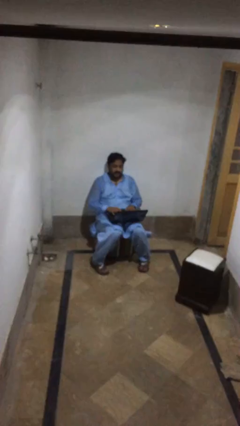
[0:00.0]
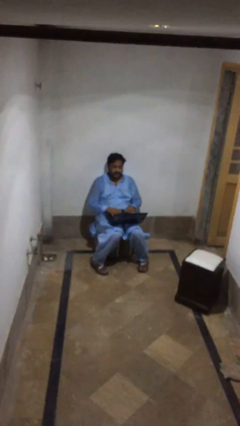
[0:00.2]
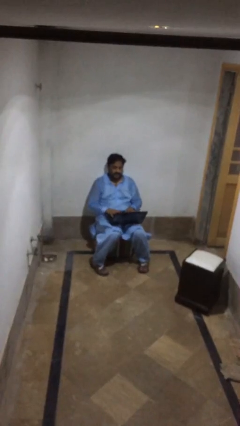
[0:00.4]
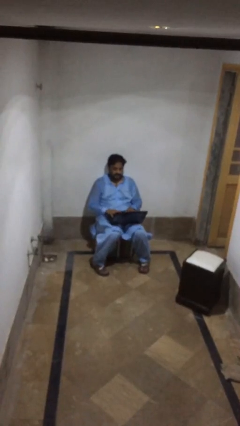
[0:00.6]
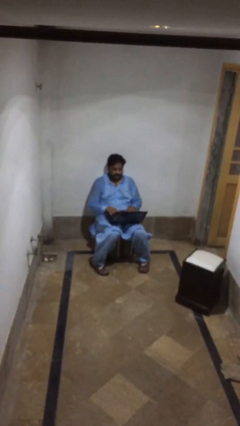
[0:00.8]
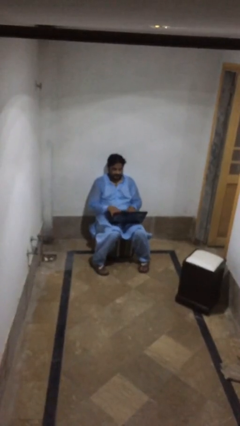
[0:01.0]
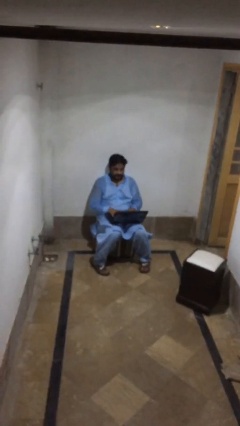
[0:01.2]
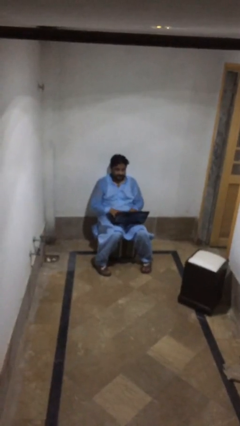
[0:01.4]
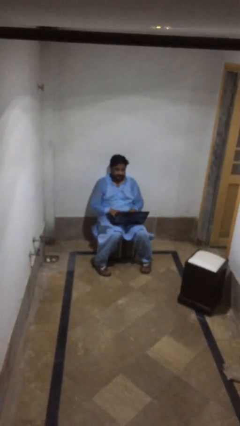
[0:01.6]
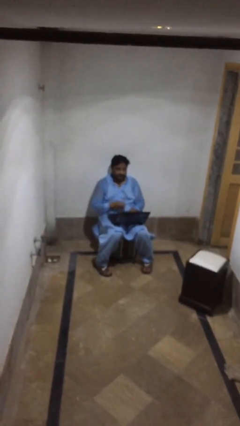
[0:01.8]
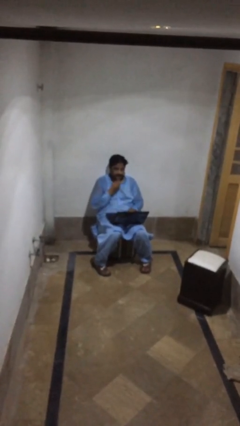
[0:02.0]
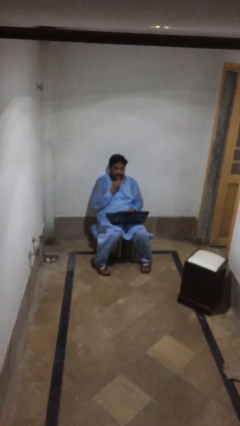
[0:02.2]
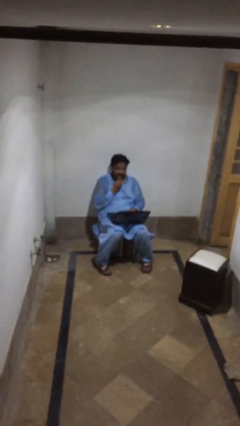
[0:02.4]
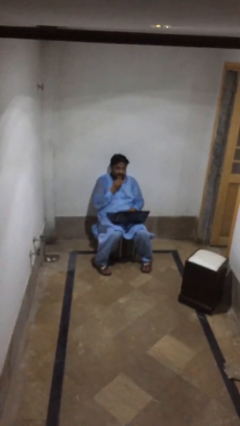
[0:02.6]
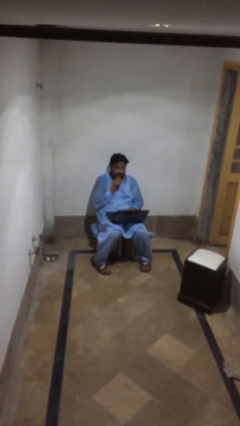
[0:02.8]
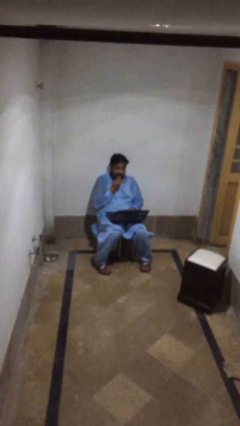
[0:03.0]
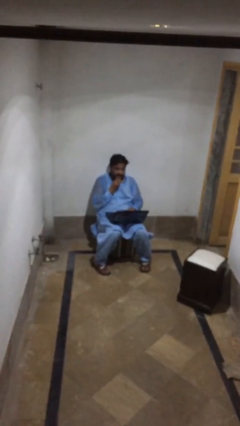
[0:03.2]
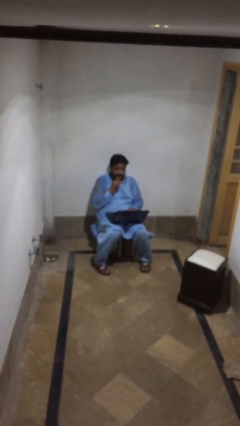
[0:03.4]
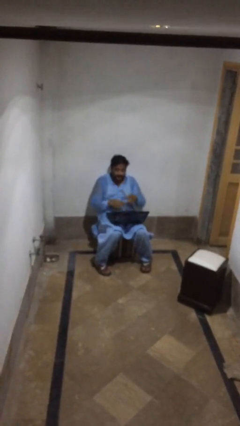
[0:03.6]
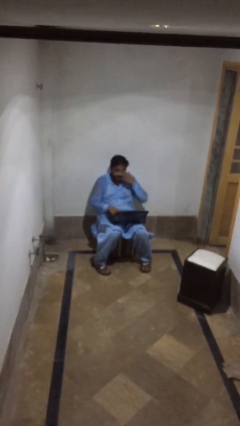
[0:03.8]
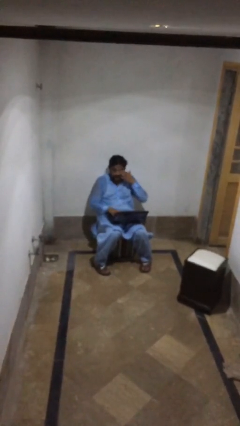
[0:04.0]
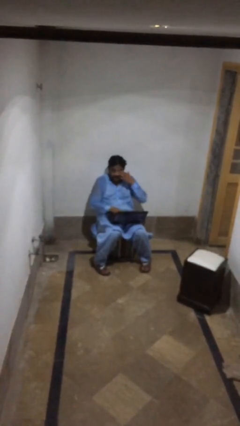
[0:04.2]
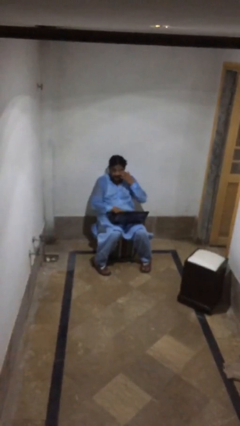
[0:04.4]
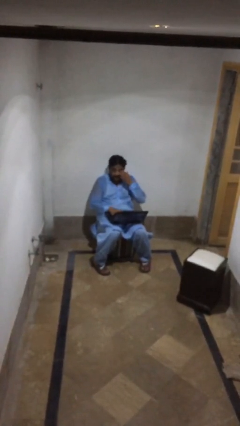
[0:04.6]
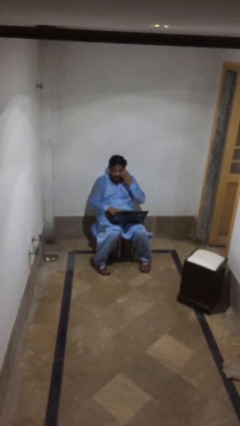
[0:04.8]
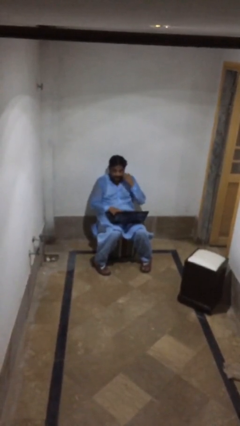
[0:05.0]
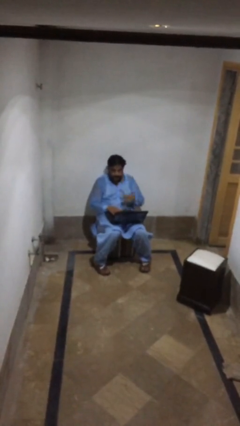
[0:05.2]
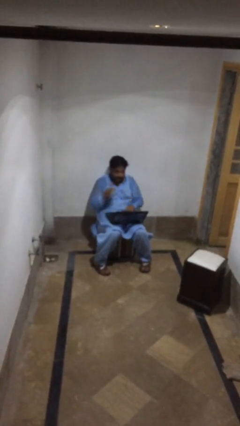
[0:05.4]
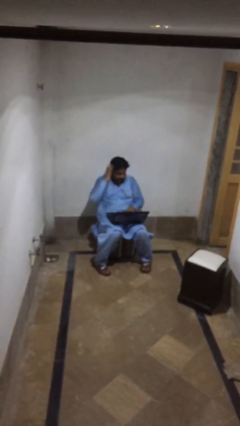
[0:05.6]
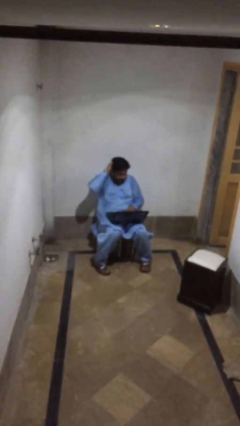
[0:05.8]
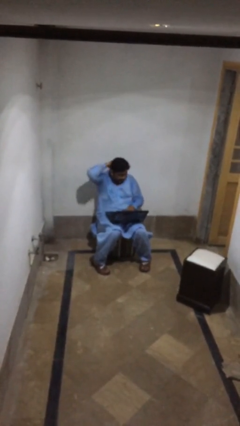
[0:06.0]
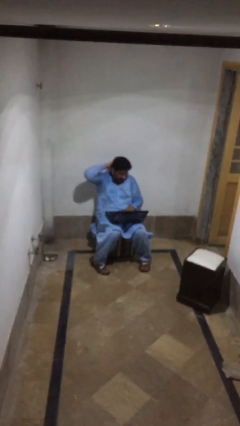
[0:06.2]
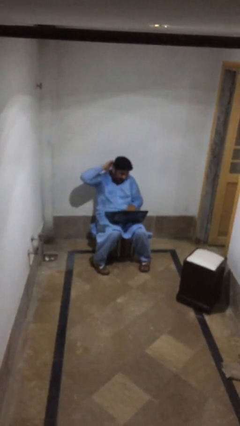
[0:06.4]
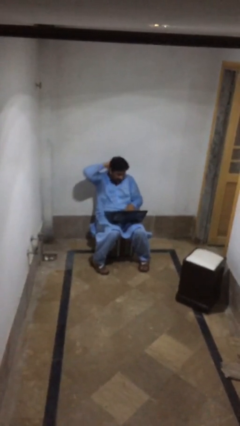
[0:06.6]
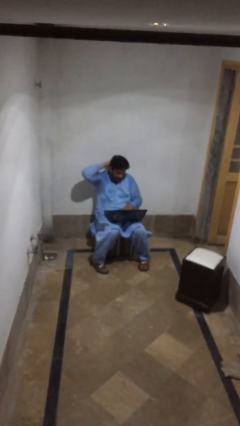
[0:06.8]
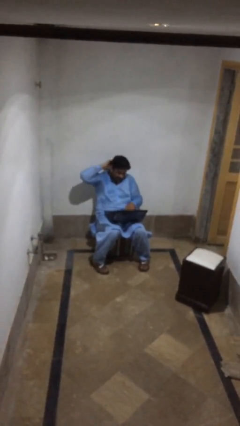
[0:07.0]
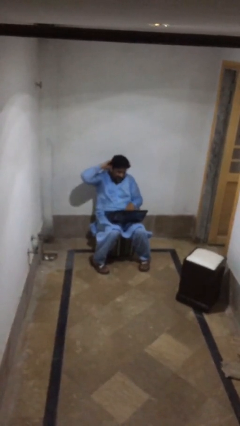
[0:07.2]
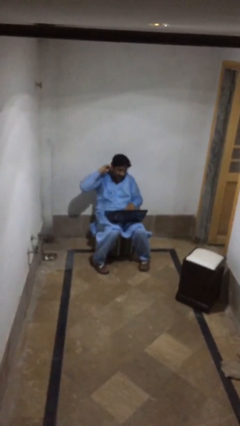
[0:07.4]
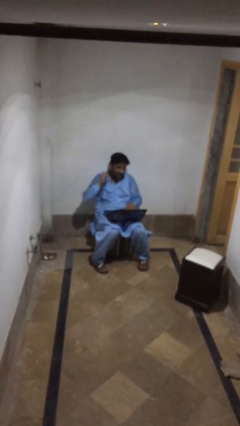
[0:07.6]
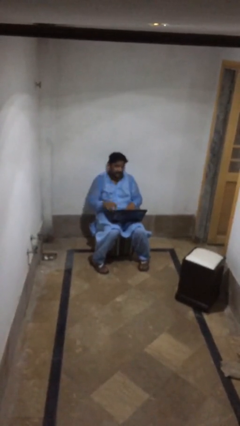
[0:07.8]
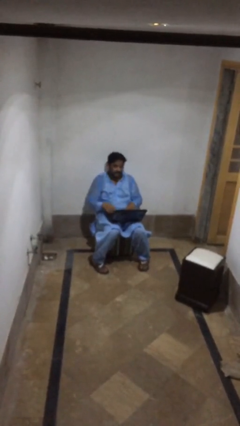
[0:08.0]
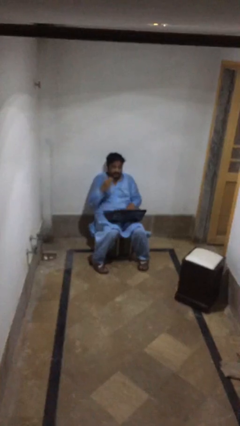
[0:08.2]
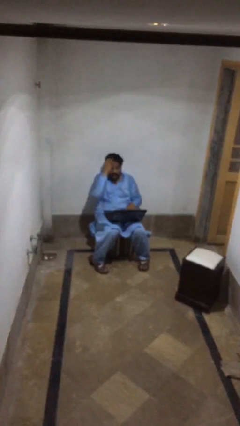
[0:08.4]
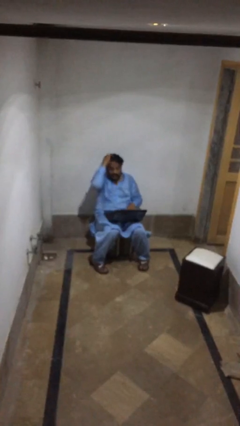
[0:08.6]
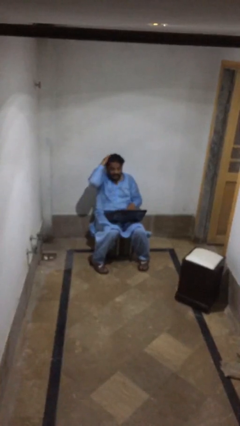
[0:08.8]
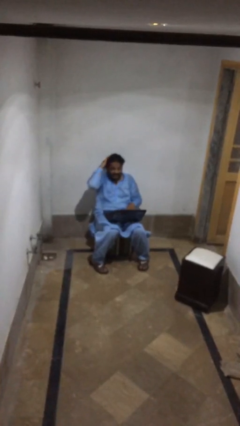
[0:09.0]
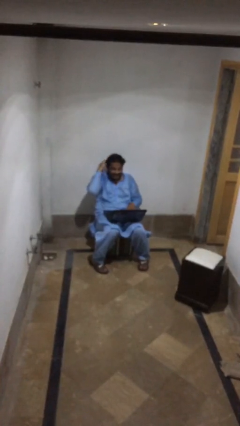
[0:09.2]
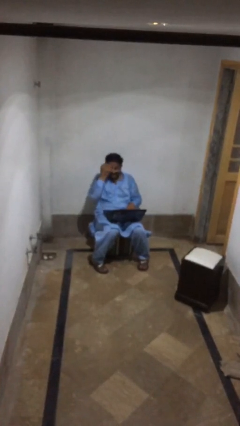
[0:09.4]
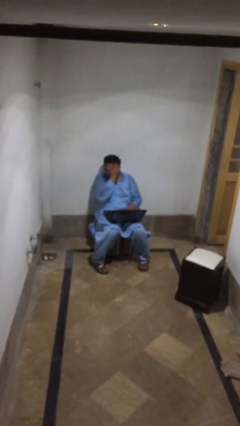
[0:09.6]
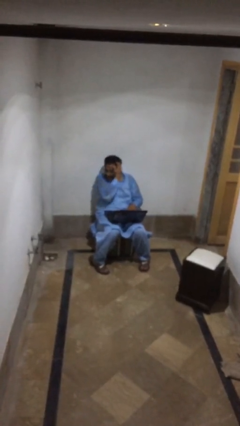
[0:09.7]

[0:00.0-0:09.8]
person interacts with laptop

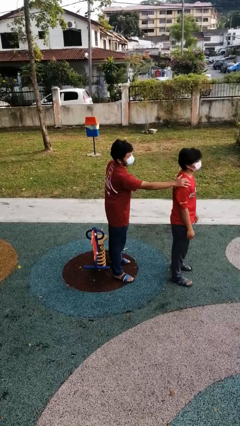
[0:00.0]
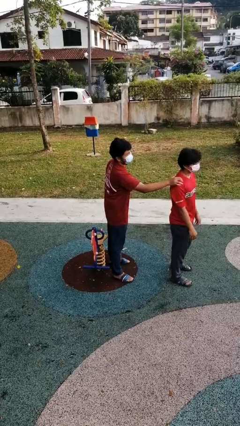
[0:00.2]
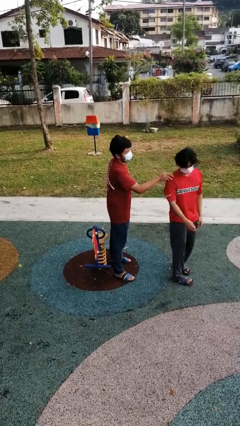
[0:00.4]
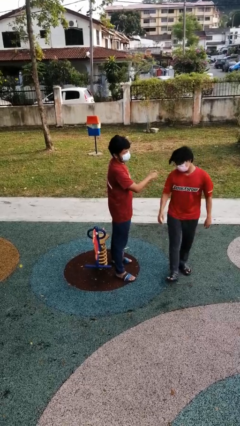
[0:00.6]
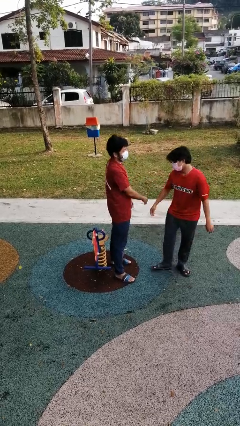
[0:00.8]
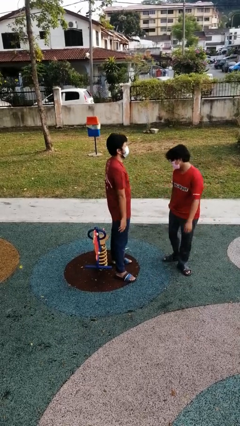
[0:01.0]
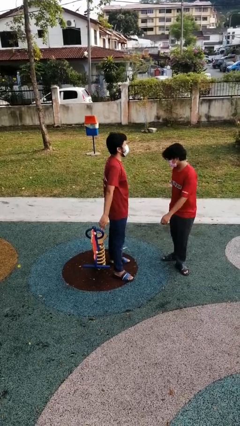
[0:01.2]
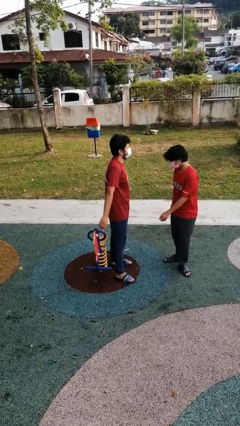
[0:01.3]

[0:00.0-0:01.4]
person spins person around

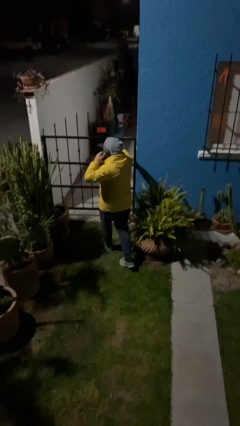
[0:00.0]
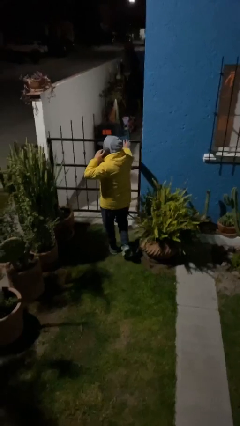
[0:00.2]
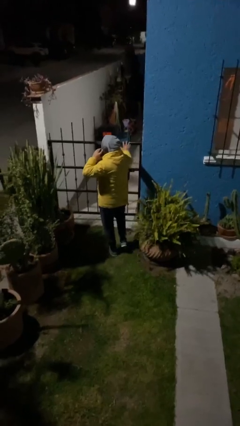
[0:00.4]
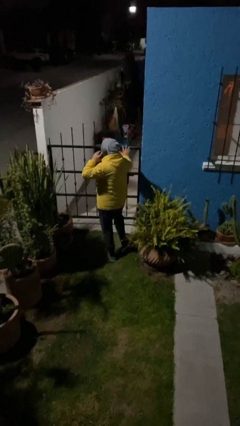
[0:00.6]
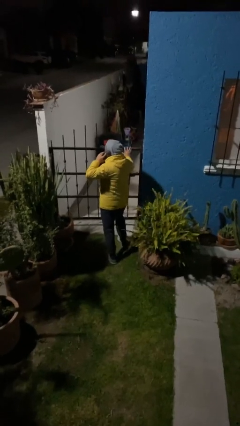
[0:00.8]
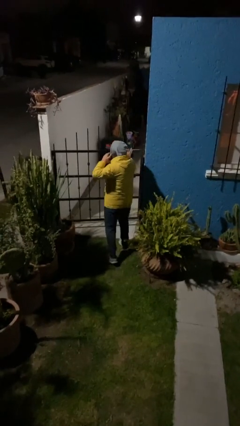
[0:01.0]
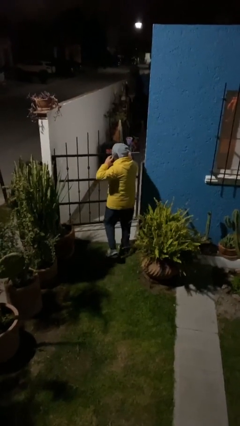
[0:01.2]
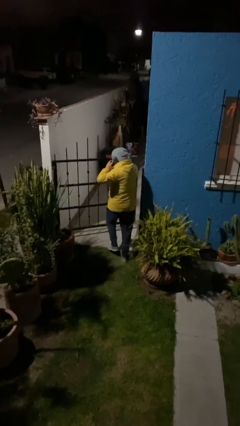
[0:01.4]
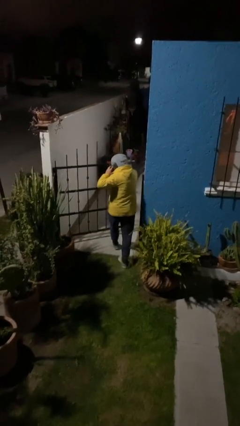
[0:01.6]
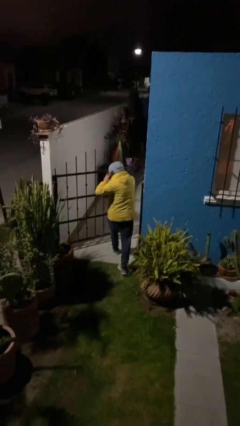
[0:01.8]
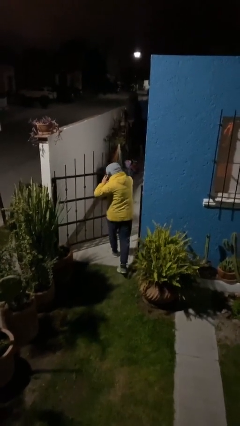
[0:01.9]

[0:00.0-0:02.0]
person opens facility door

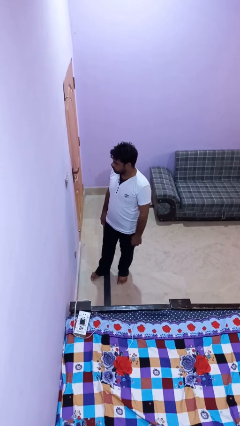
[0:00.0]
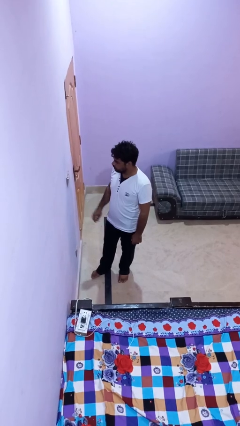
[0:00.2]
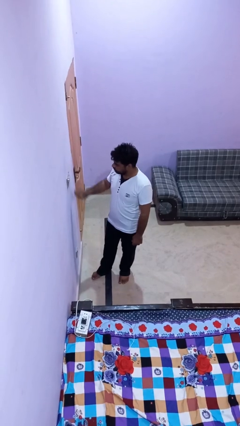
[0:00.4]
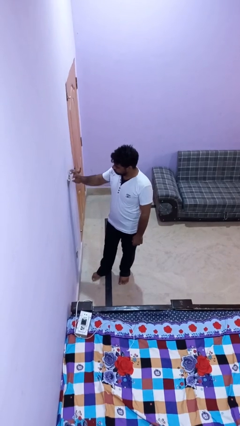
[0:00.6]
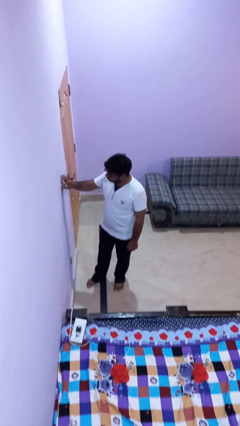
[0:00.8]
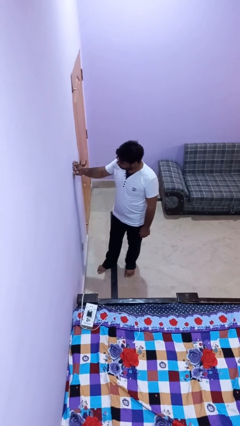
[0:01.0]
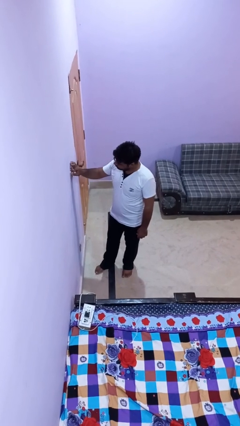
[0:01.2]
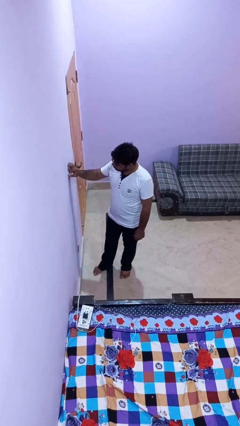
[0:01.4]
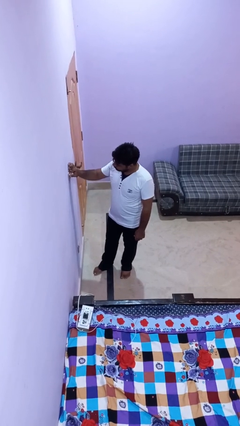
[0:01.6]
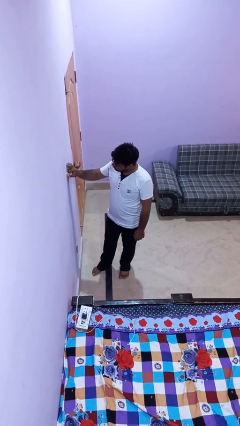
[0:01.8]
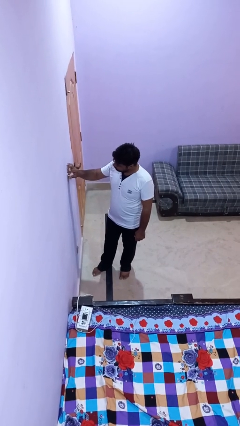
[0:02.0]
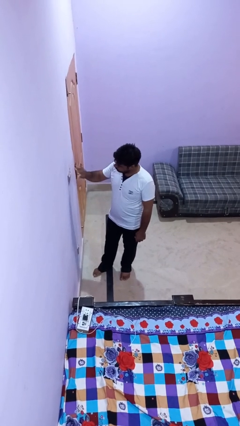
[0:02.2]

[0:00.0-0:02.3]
person adjusts thermostat

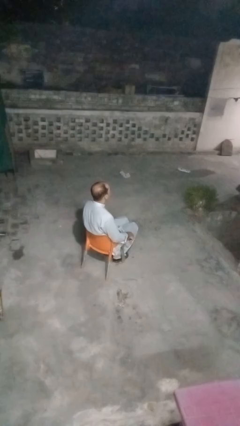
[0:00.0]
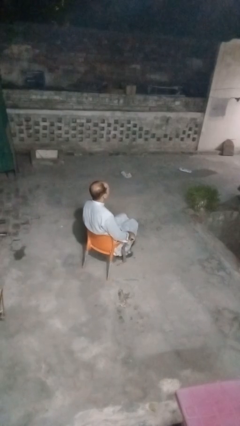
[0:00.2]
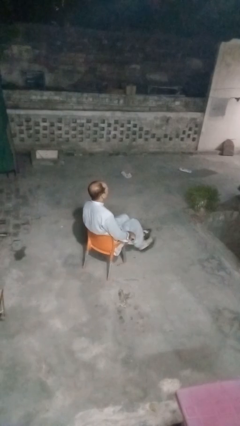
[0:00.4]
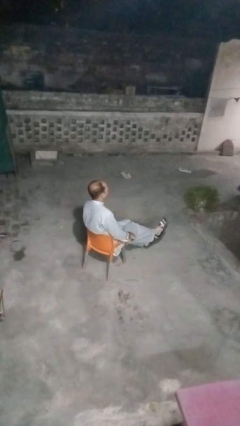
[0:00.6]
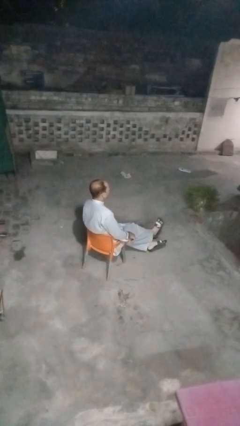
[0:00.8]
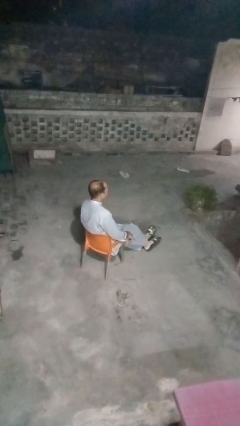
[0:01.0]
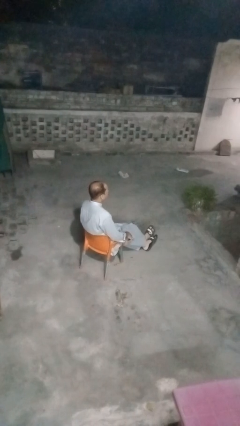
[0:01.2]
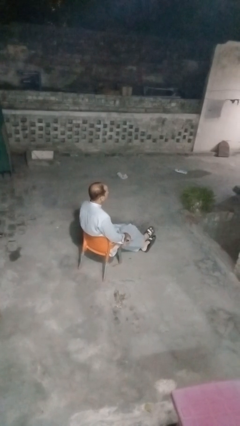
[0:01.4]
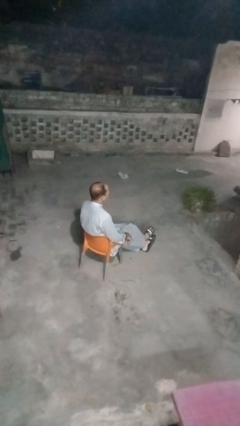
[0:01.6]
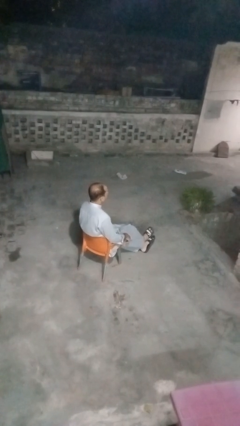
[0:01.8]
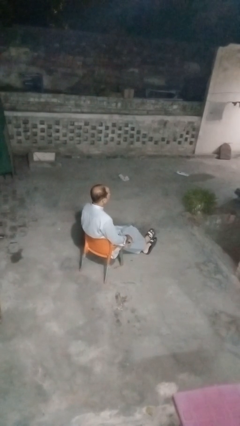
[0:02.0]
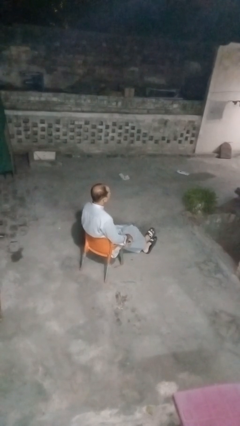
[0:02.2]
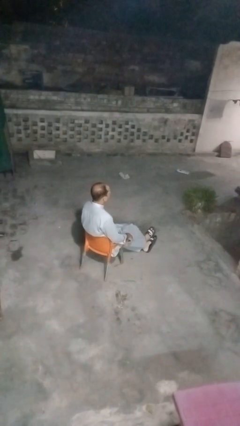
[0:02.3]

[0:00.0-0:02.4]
person crosses legs
